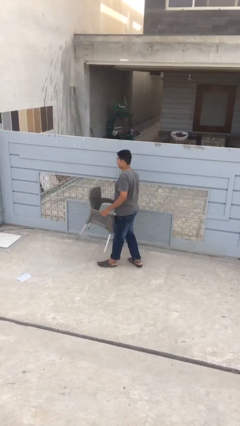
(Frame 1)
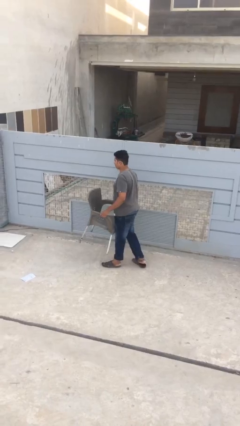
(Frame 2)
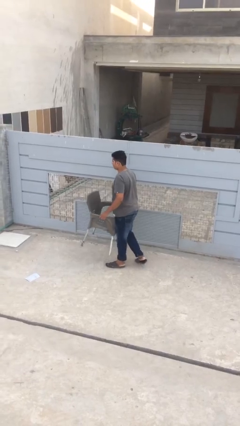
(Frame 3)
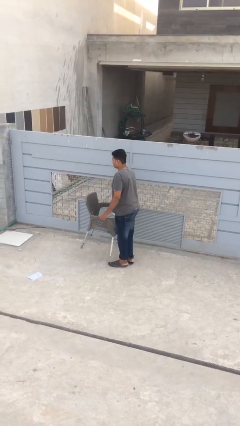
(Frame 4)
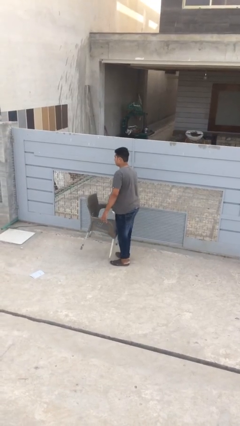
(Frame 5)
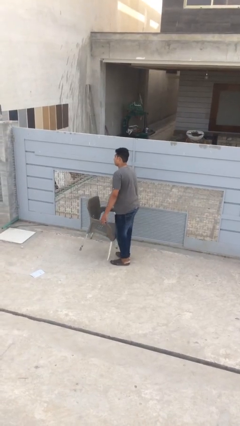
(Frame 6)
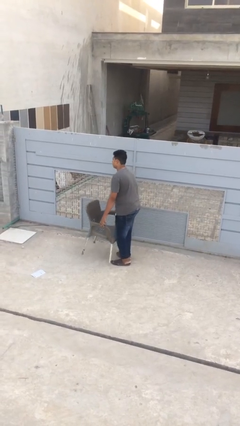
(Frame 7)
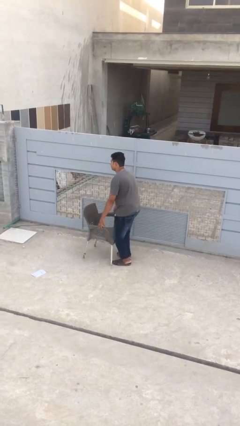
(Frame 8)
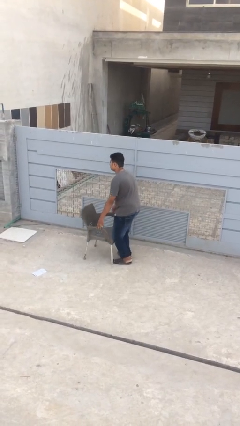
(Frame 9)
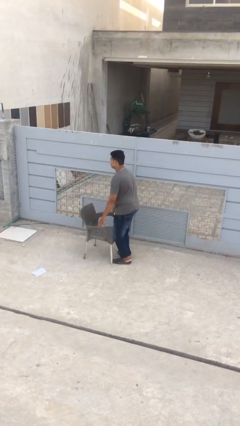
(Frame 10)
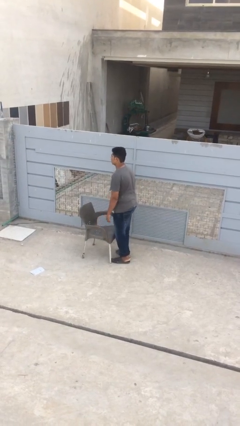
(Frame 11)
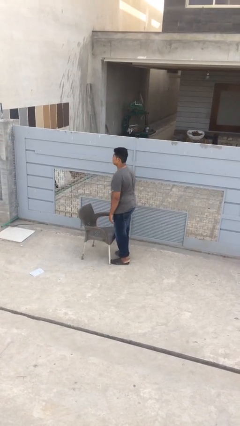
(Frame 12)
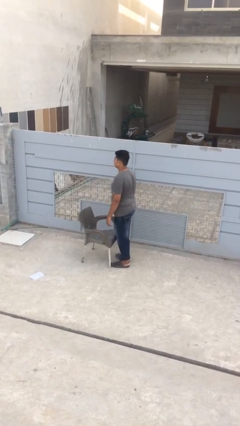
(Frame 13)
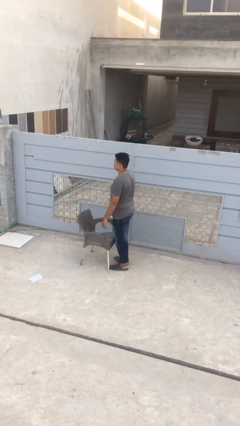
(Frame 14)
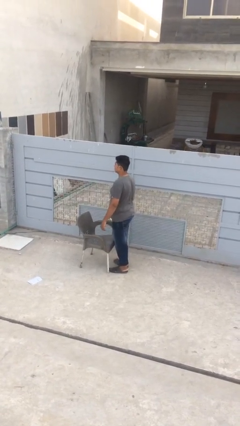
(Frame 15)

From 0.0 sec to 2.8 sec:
person puts down object on floor

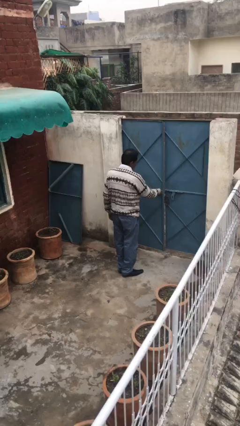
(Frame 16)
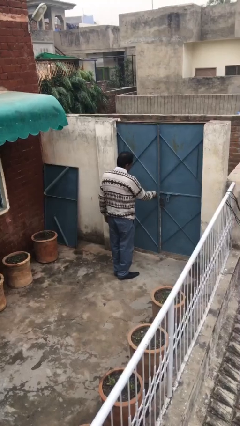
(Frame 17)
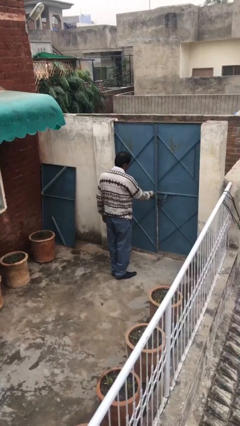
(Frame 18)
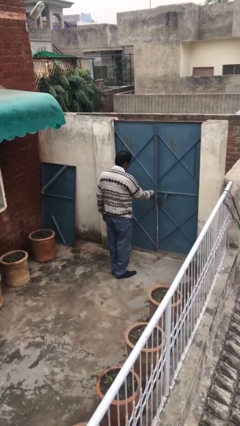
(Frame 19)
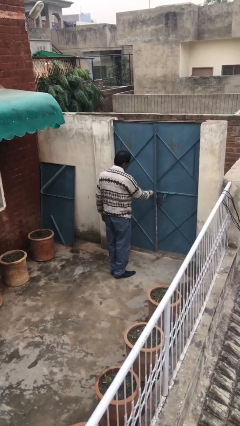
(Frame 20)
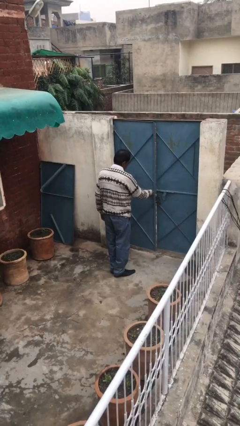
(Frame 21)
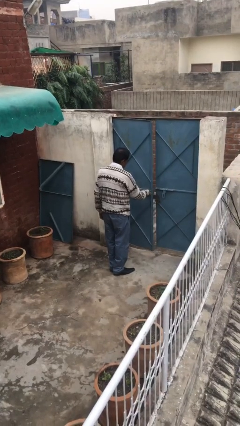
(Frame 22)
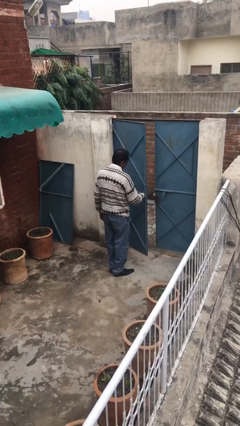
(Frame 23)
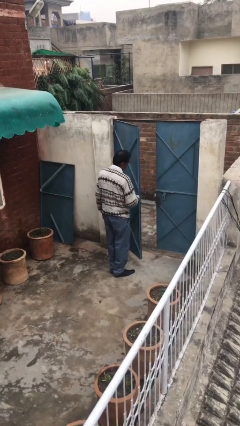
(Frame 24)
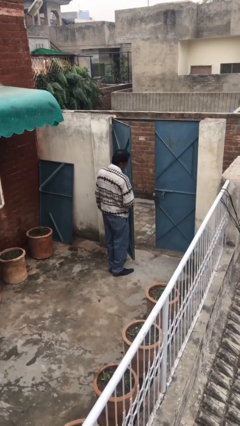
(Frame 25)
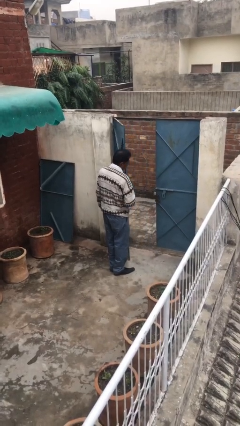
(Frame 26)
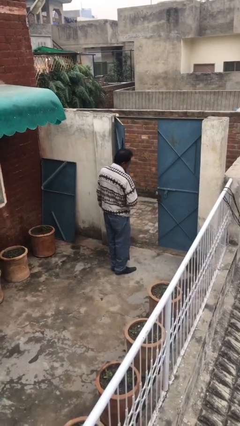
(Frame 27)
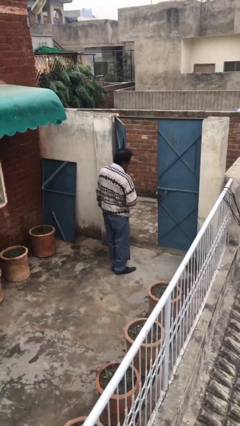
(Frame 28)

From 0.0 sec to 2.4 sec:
person opens facility door

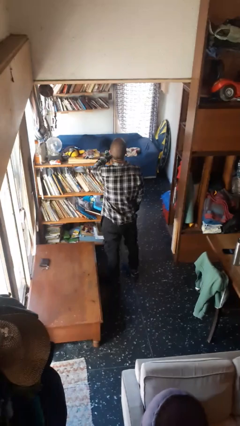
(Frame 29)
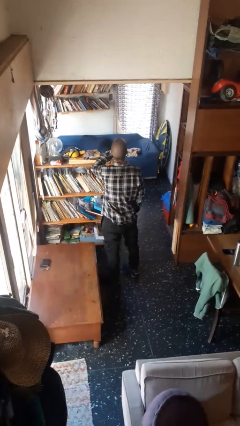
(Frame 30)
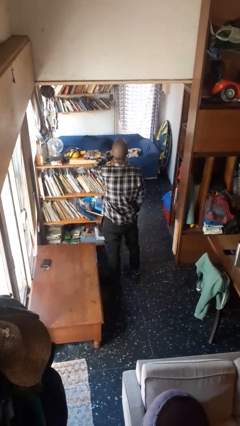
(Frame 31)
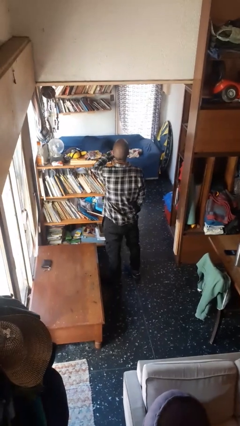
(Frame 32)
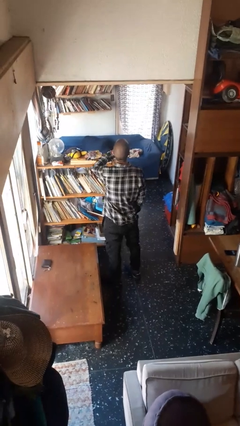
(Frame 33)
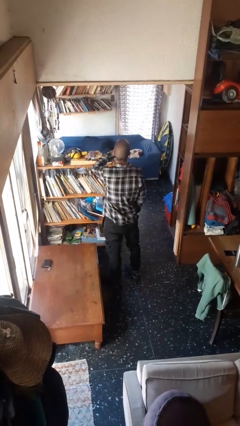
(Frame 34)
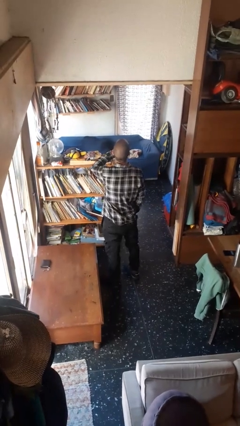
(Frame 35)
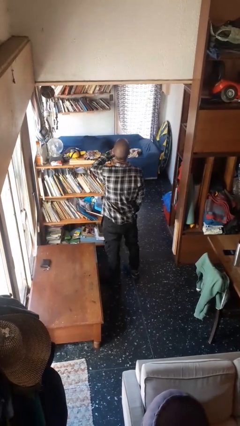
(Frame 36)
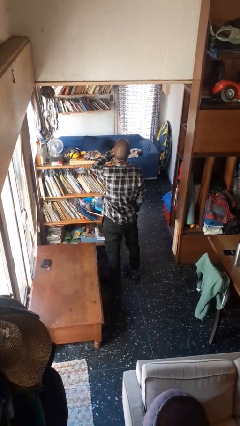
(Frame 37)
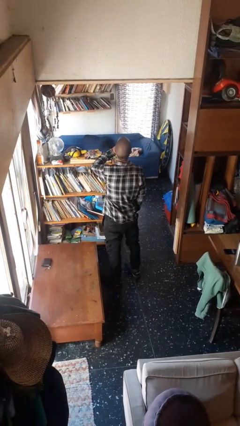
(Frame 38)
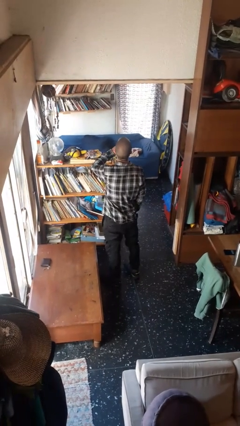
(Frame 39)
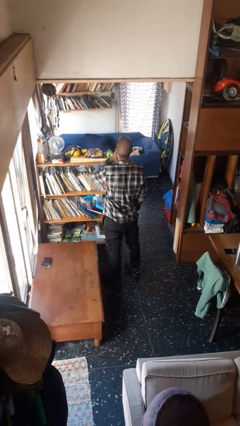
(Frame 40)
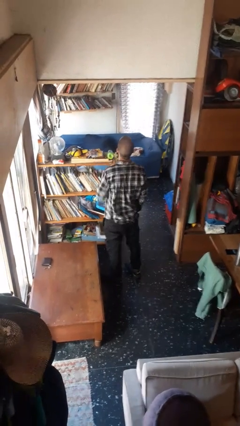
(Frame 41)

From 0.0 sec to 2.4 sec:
person gestures be quiet

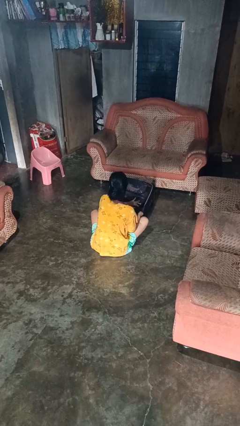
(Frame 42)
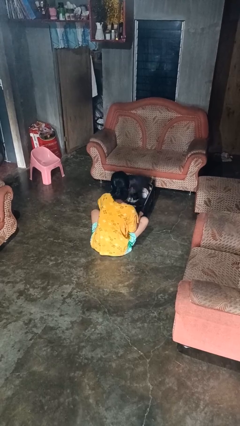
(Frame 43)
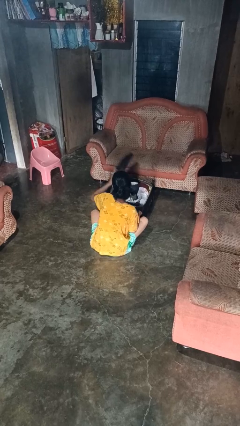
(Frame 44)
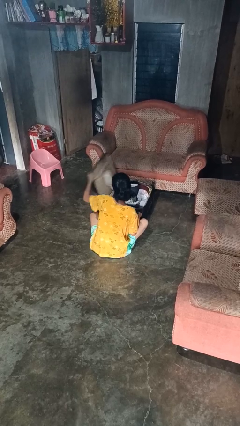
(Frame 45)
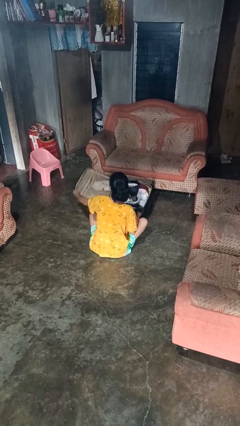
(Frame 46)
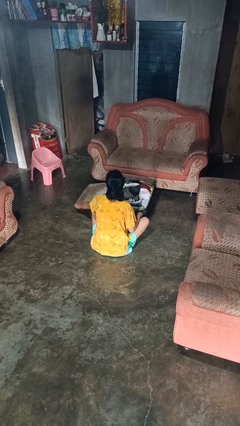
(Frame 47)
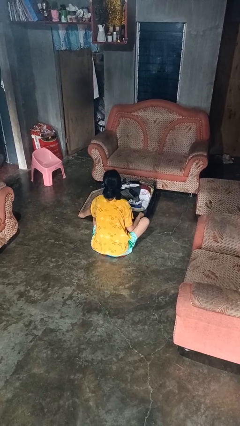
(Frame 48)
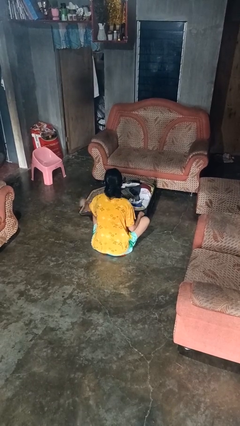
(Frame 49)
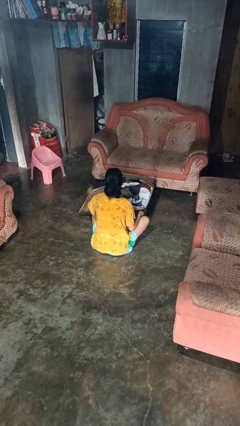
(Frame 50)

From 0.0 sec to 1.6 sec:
person opens suitcase

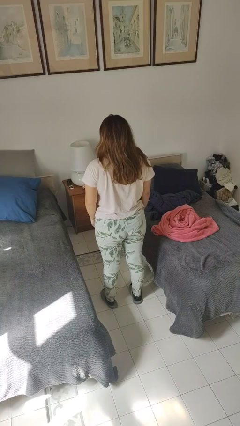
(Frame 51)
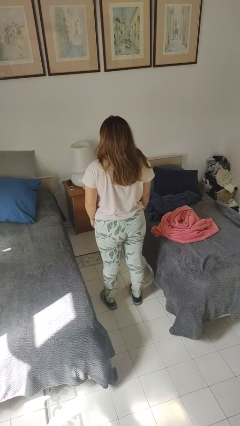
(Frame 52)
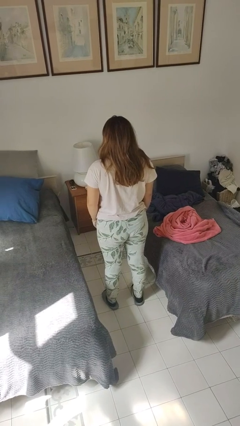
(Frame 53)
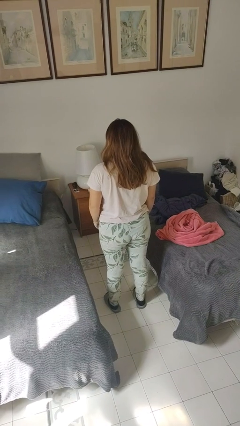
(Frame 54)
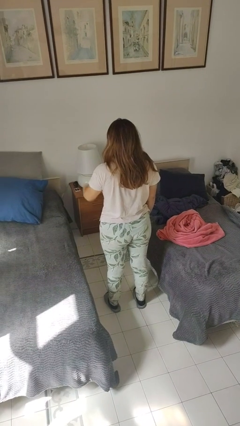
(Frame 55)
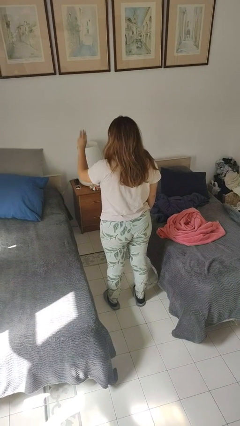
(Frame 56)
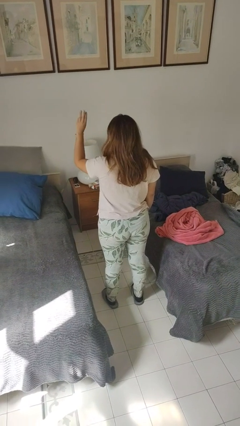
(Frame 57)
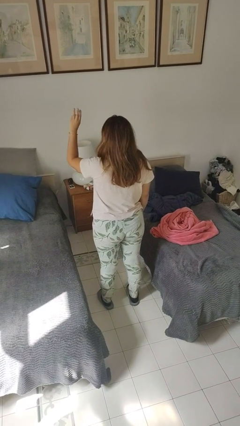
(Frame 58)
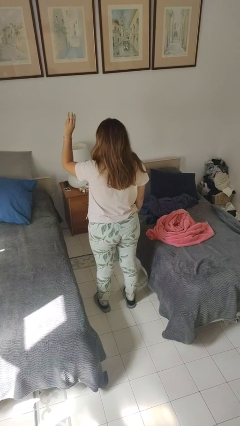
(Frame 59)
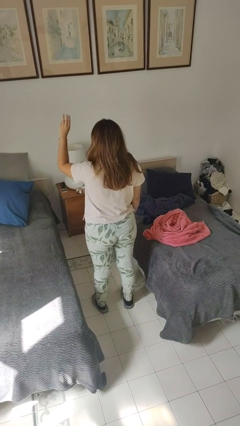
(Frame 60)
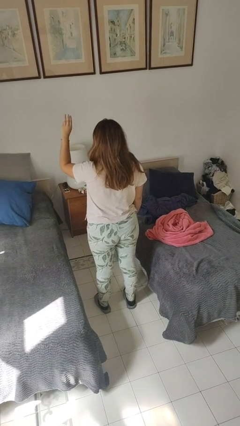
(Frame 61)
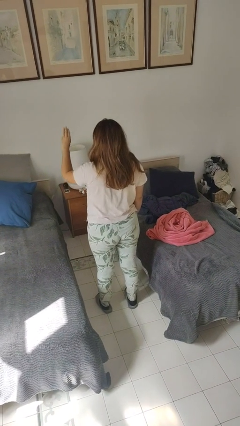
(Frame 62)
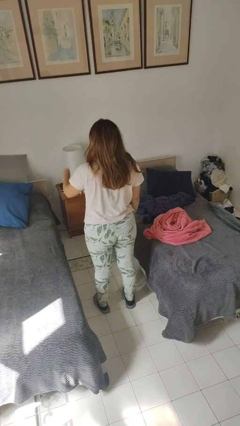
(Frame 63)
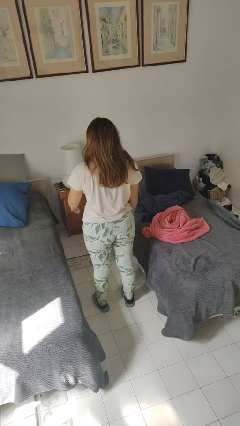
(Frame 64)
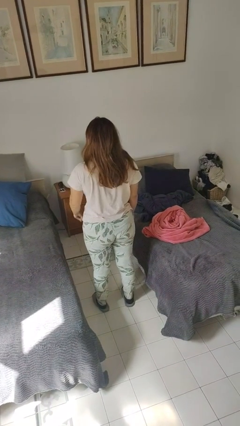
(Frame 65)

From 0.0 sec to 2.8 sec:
person gestures number three

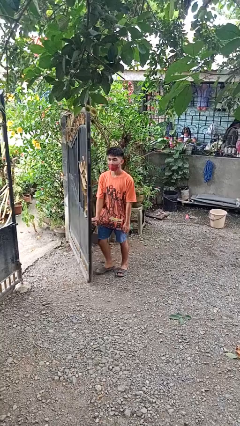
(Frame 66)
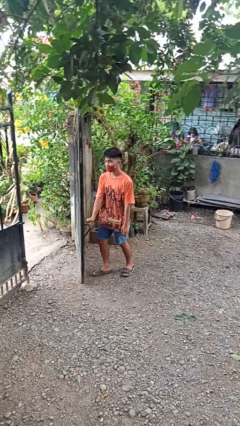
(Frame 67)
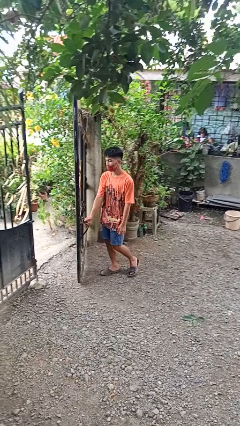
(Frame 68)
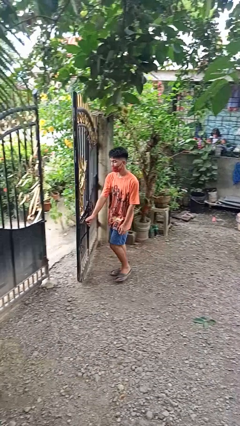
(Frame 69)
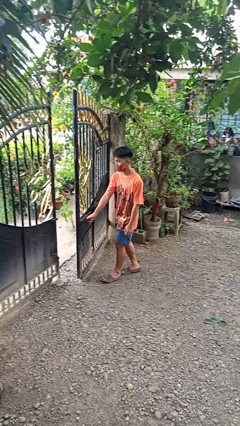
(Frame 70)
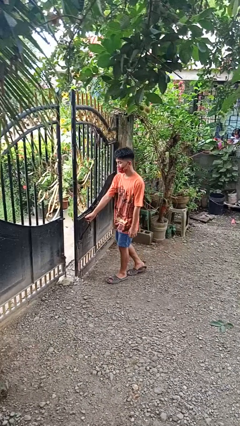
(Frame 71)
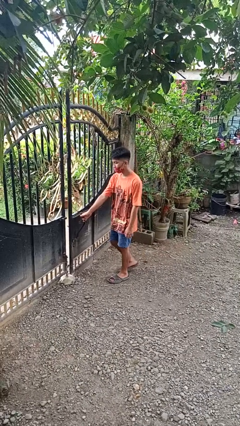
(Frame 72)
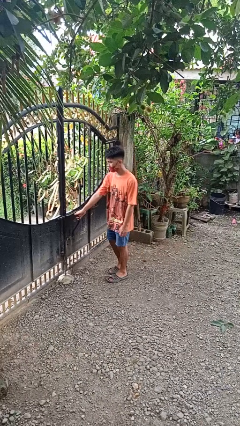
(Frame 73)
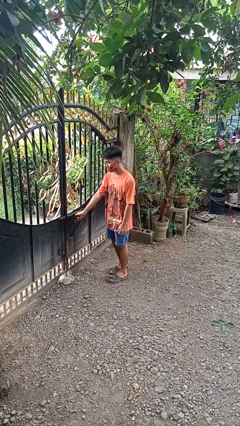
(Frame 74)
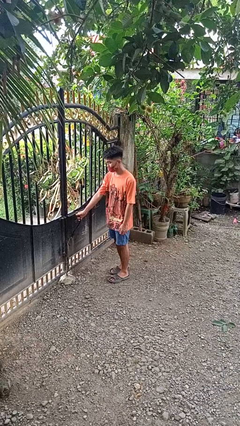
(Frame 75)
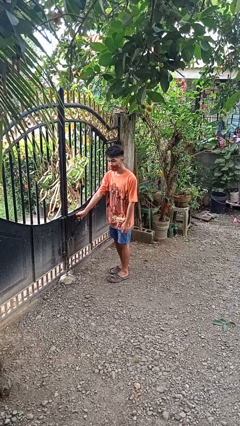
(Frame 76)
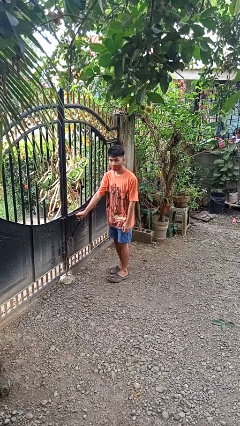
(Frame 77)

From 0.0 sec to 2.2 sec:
person closes gate

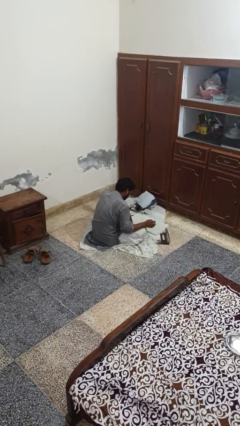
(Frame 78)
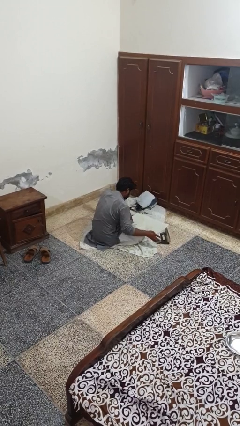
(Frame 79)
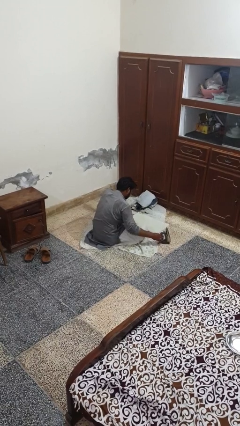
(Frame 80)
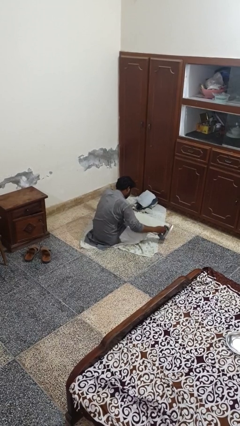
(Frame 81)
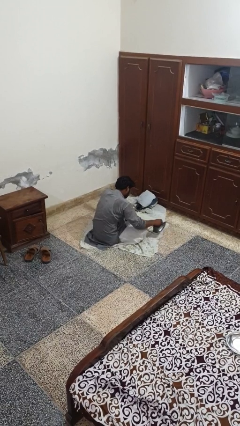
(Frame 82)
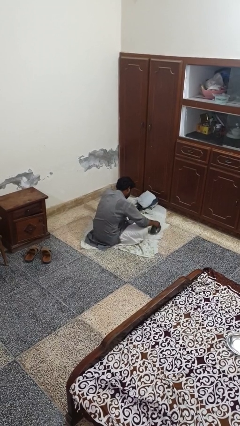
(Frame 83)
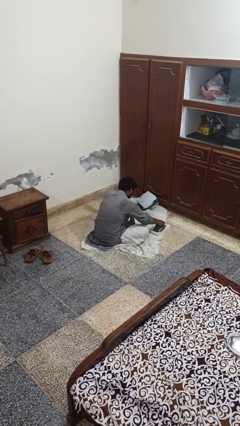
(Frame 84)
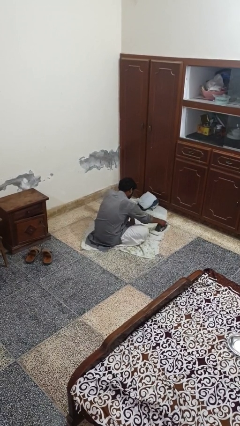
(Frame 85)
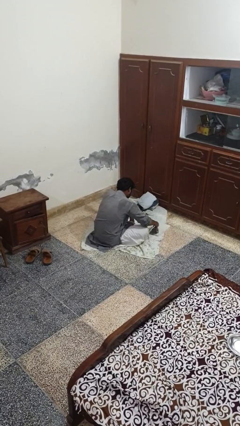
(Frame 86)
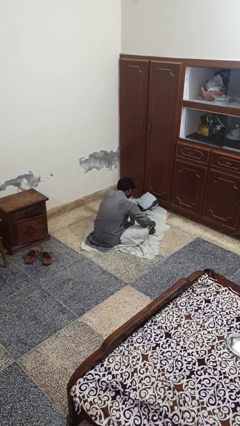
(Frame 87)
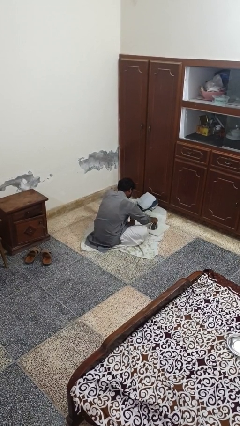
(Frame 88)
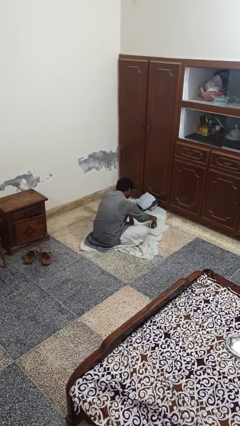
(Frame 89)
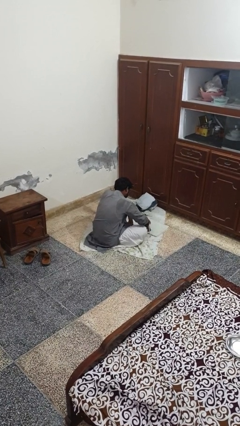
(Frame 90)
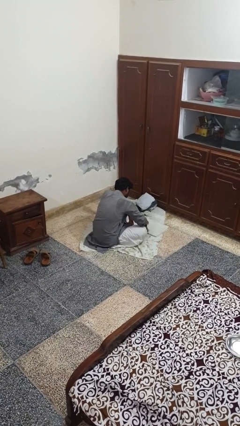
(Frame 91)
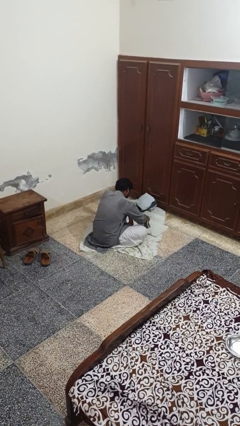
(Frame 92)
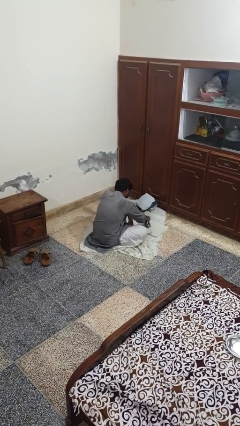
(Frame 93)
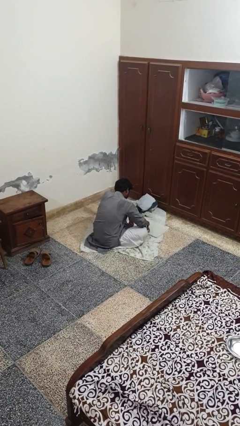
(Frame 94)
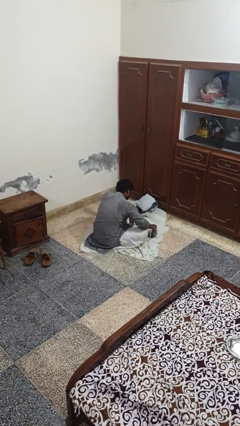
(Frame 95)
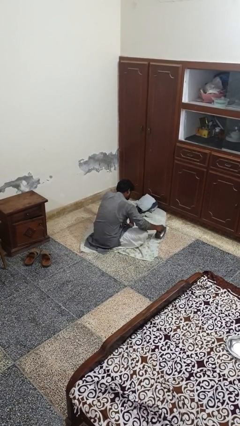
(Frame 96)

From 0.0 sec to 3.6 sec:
person irons clothes
